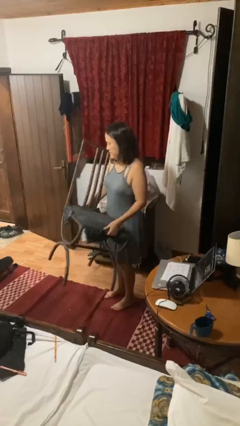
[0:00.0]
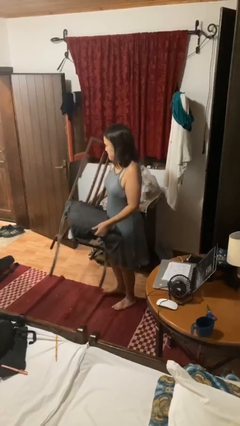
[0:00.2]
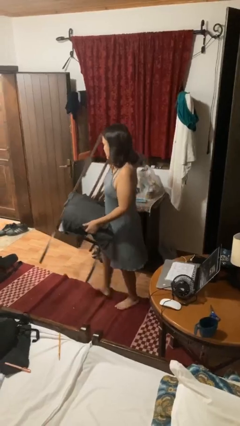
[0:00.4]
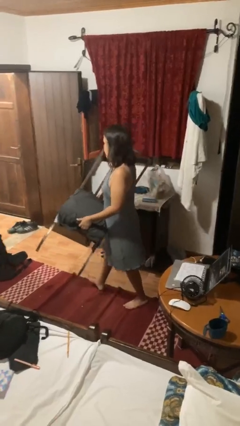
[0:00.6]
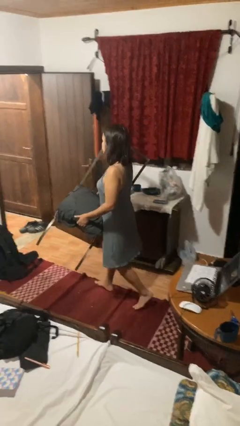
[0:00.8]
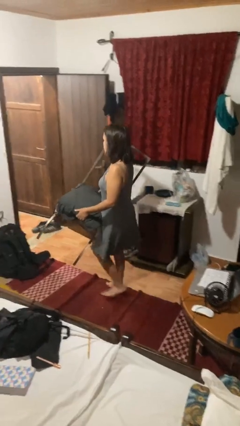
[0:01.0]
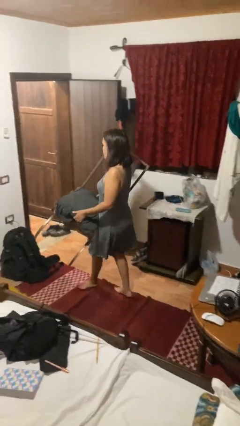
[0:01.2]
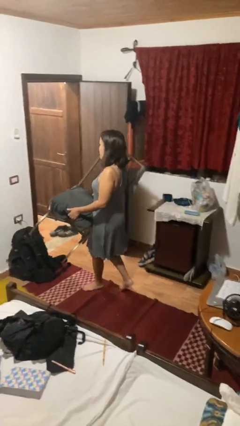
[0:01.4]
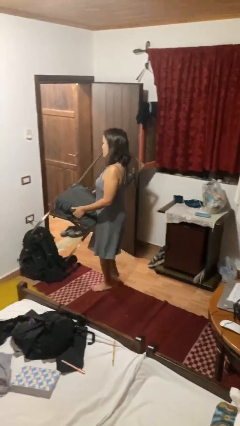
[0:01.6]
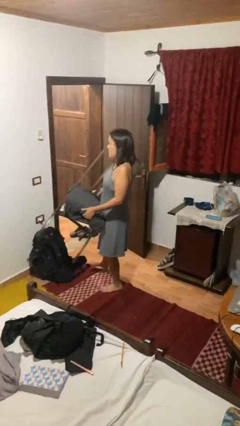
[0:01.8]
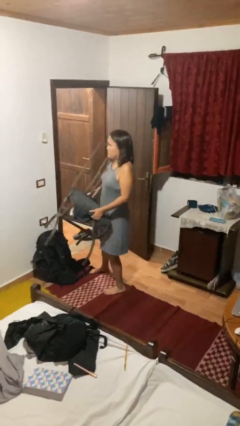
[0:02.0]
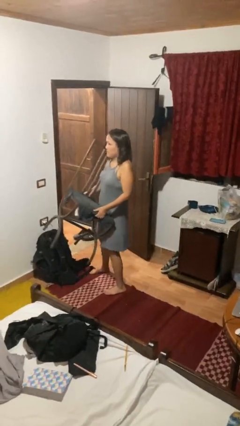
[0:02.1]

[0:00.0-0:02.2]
person carries furniture

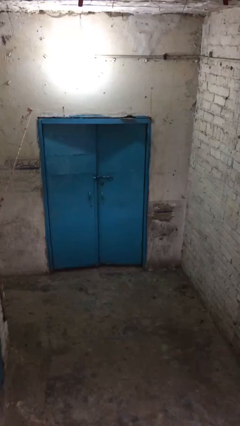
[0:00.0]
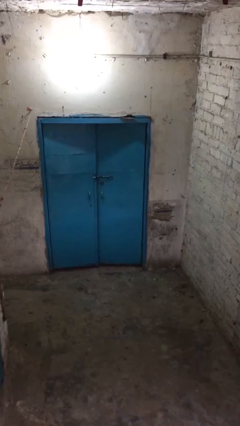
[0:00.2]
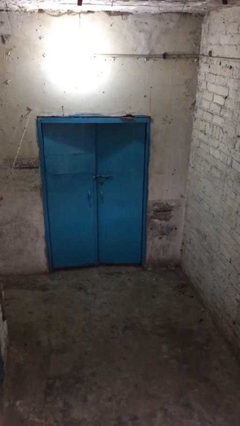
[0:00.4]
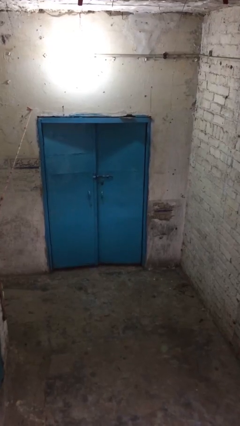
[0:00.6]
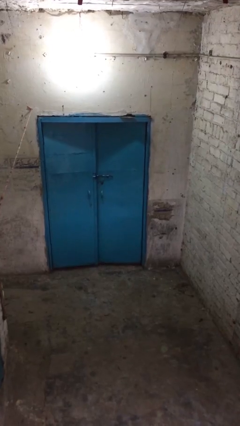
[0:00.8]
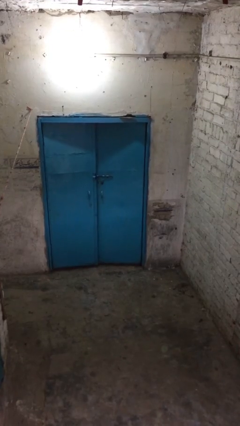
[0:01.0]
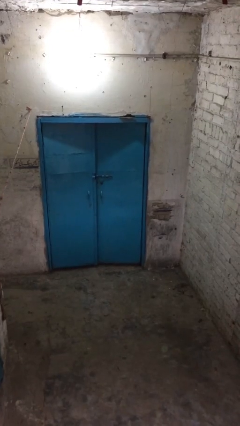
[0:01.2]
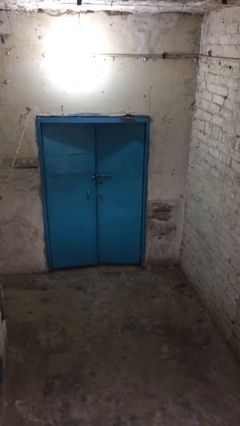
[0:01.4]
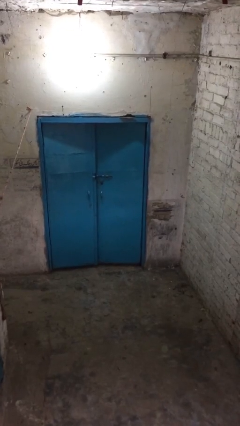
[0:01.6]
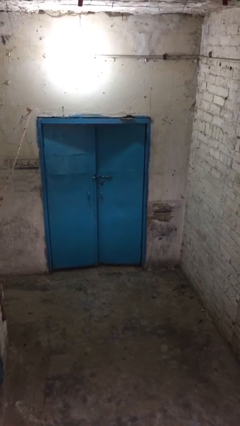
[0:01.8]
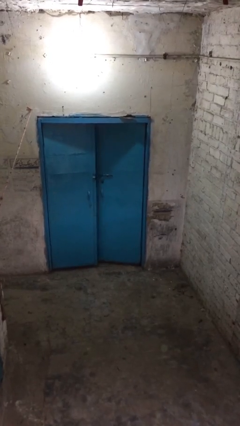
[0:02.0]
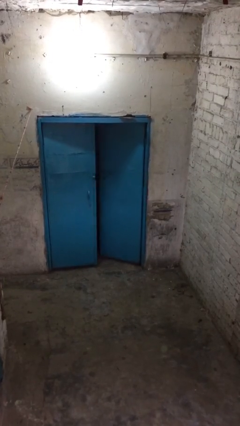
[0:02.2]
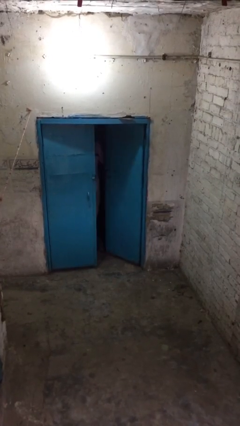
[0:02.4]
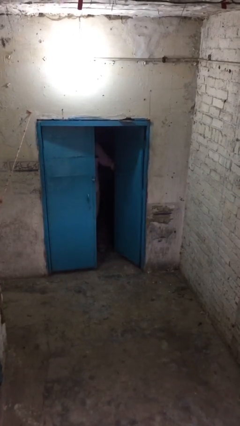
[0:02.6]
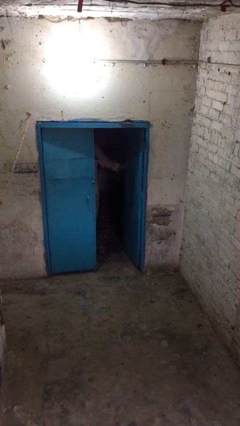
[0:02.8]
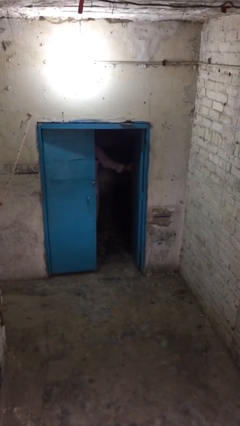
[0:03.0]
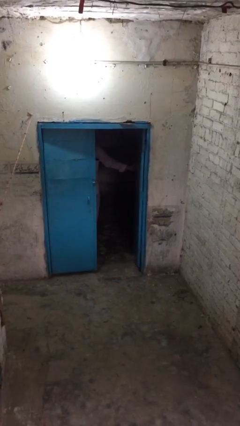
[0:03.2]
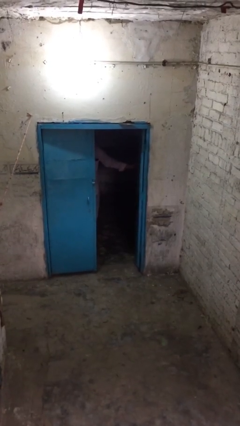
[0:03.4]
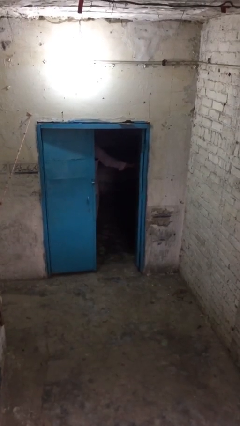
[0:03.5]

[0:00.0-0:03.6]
person opens facility door

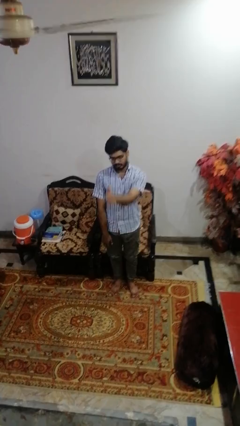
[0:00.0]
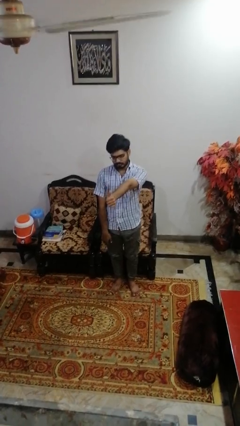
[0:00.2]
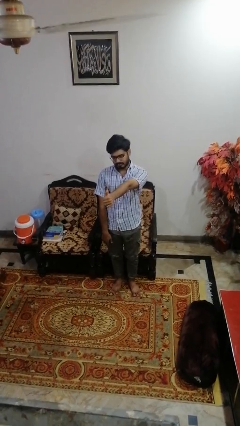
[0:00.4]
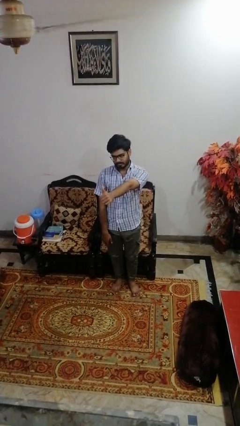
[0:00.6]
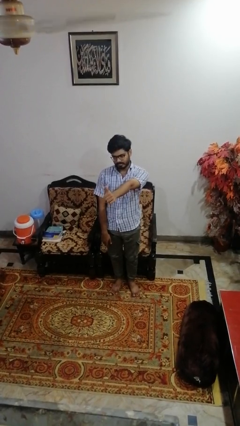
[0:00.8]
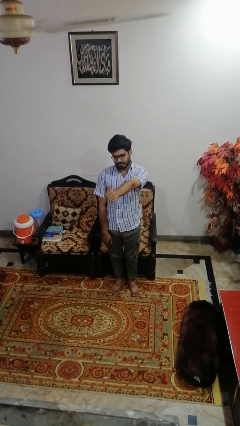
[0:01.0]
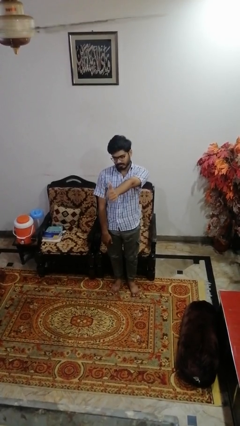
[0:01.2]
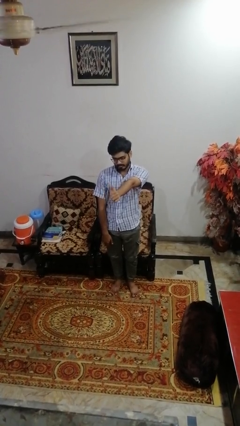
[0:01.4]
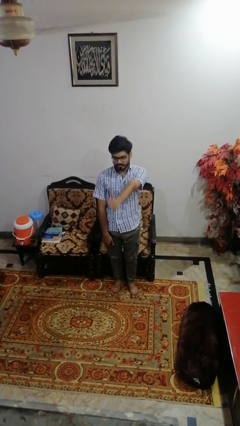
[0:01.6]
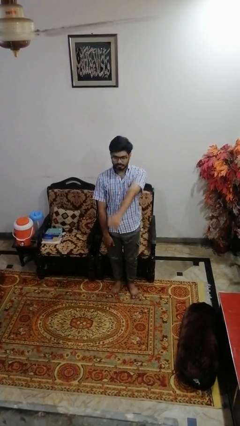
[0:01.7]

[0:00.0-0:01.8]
person gestures thumbs up

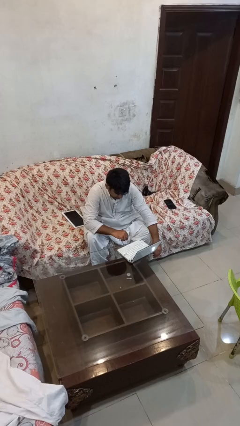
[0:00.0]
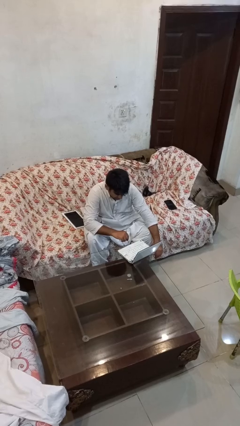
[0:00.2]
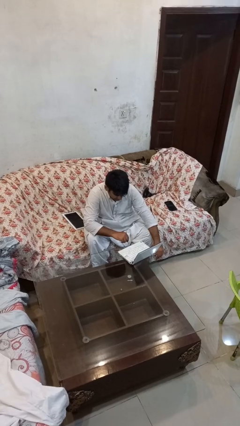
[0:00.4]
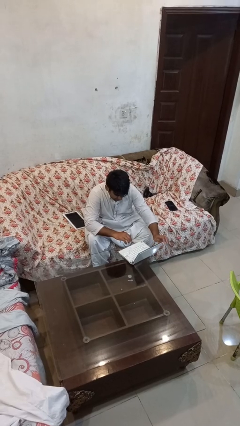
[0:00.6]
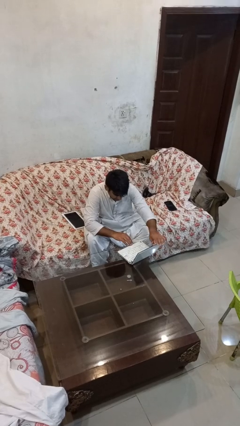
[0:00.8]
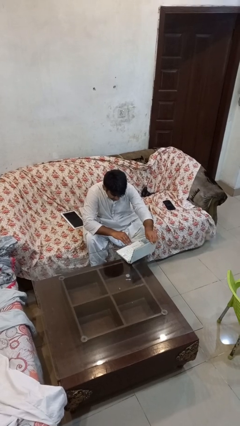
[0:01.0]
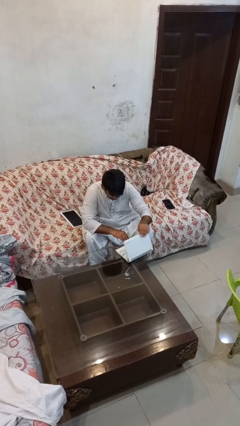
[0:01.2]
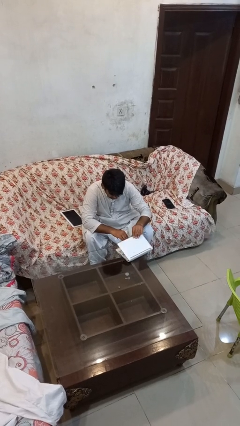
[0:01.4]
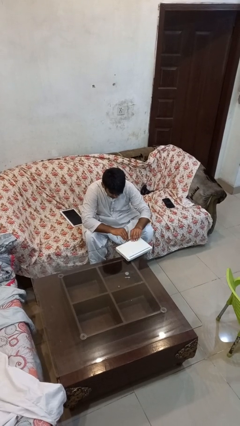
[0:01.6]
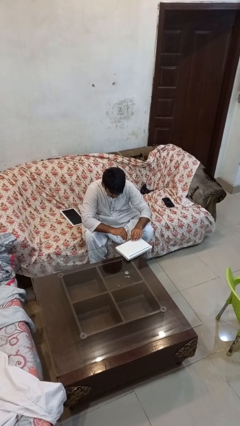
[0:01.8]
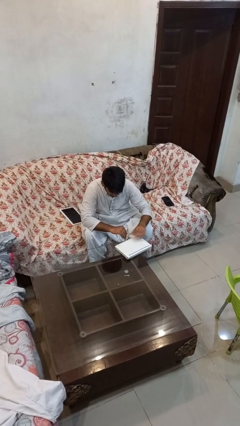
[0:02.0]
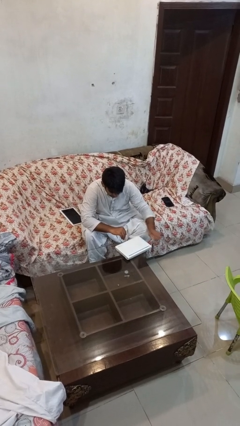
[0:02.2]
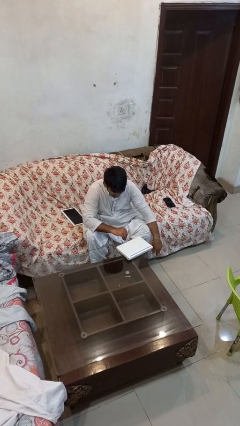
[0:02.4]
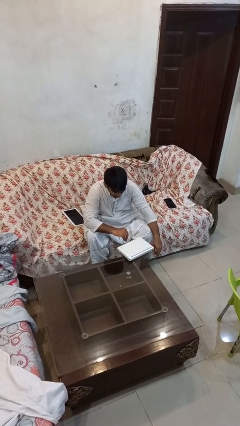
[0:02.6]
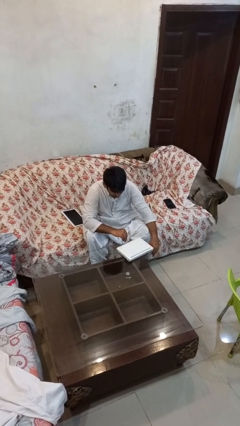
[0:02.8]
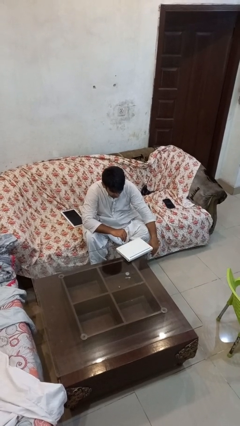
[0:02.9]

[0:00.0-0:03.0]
person closes laptop

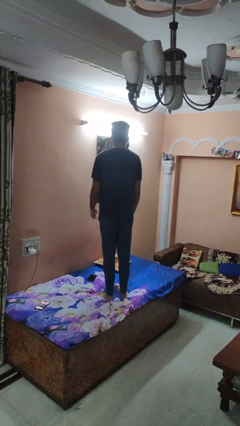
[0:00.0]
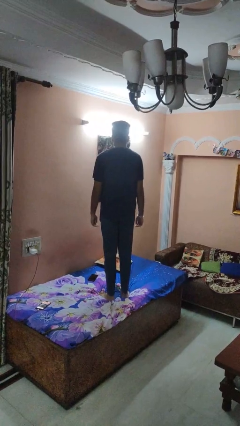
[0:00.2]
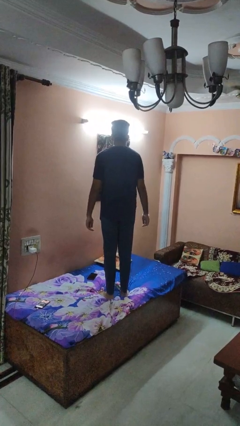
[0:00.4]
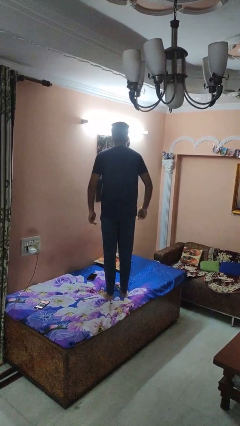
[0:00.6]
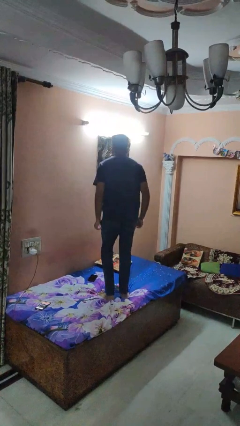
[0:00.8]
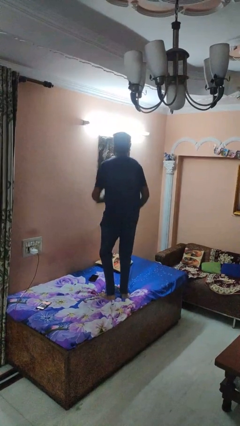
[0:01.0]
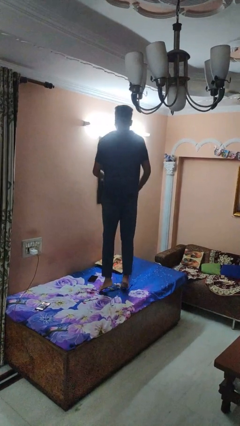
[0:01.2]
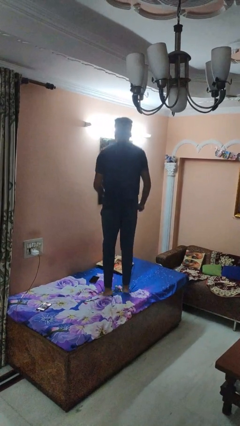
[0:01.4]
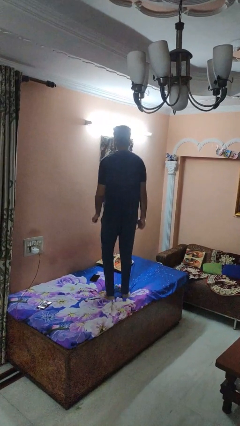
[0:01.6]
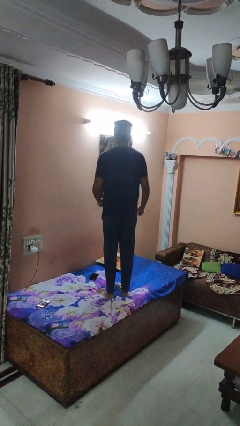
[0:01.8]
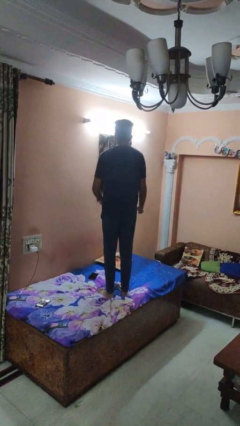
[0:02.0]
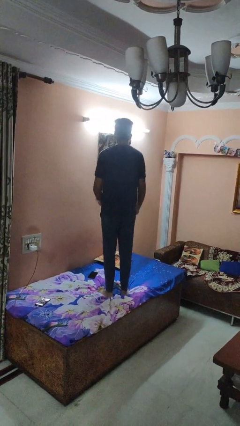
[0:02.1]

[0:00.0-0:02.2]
person jumps on bed

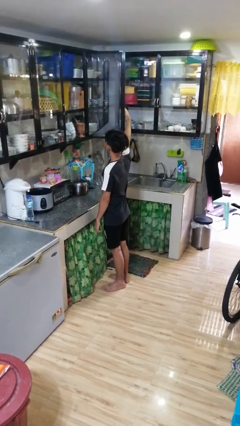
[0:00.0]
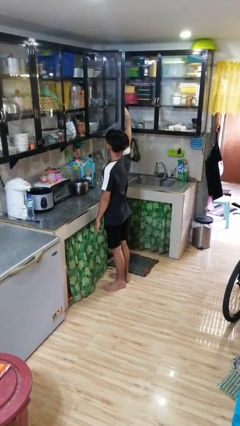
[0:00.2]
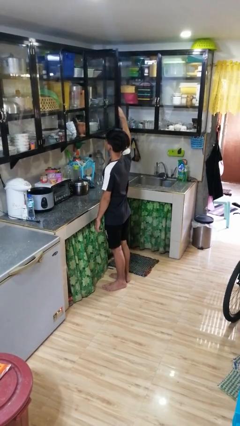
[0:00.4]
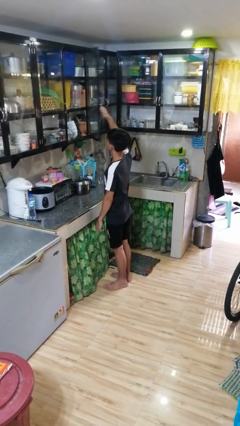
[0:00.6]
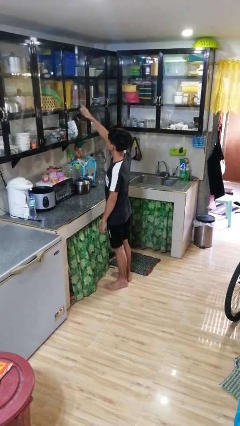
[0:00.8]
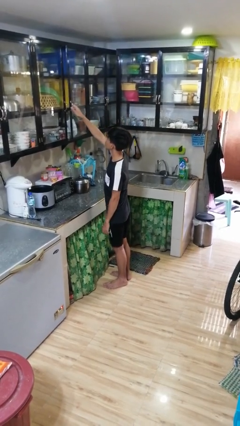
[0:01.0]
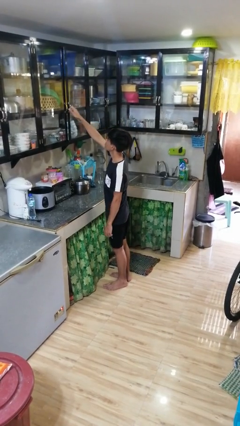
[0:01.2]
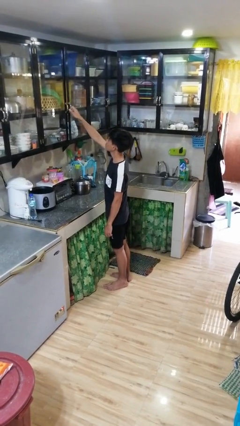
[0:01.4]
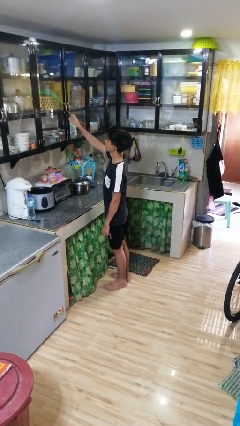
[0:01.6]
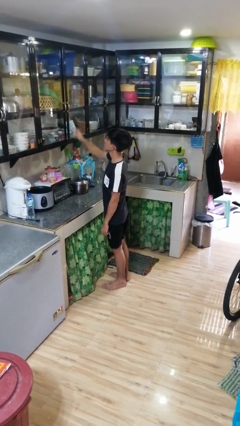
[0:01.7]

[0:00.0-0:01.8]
person closes cabinet

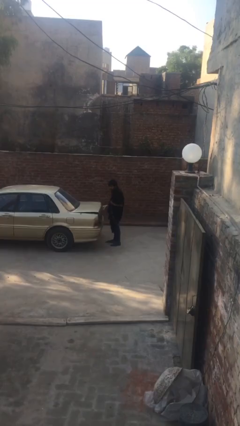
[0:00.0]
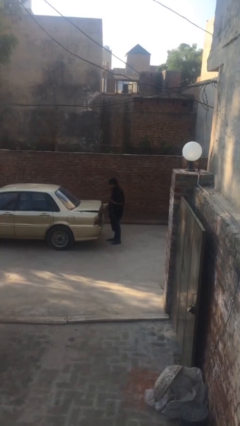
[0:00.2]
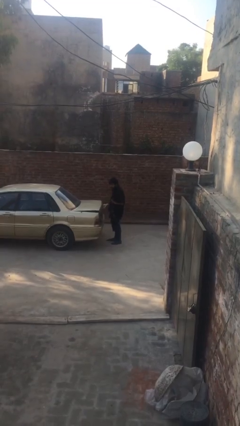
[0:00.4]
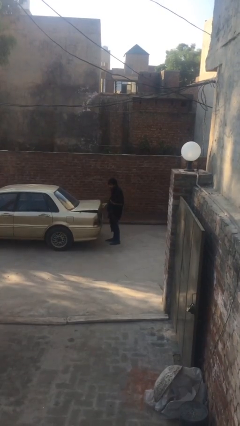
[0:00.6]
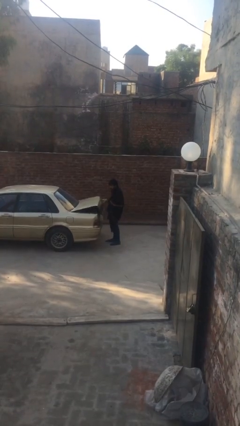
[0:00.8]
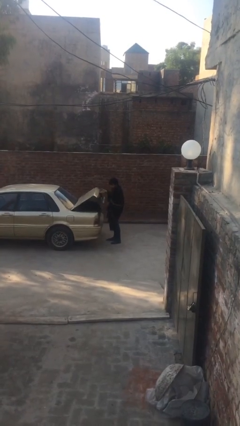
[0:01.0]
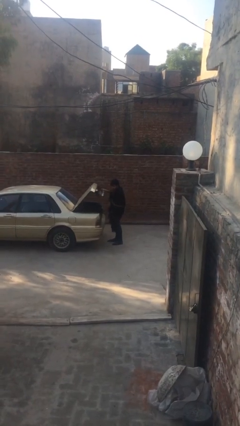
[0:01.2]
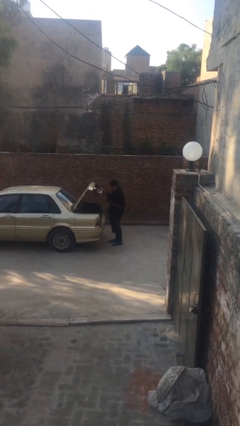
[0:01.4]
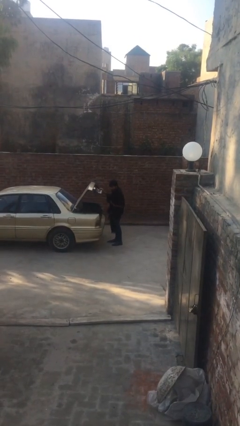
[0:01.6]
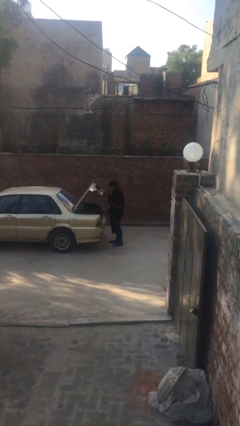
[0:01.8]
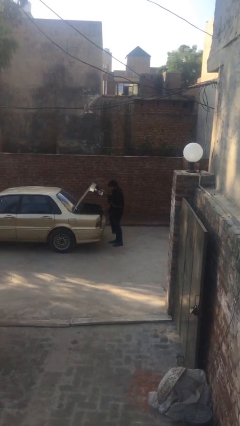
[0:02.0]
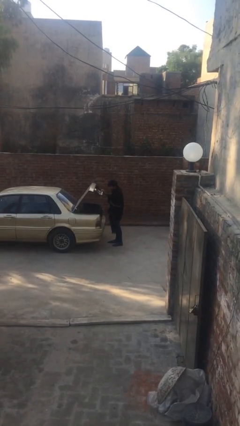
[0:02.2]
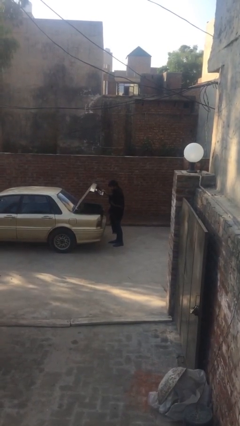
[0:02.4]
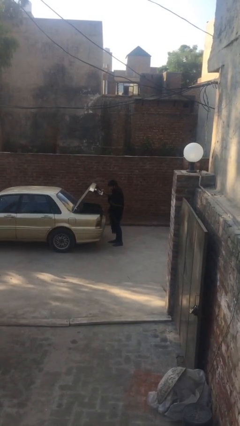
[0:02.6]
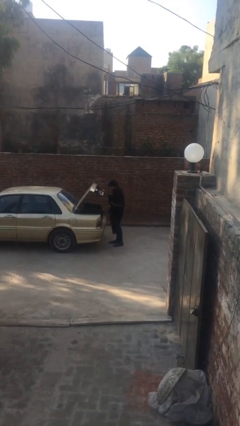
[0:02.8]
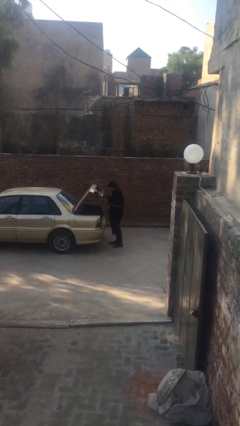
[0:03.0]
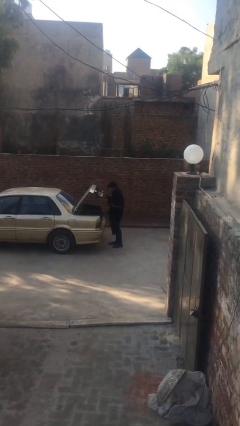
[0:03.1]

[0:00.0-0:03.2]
person opens car trunk
